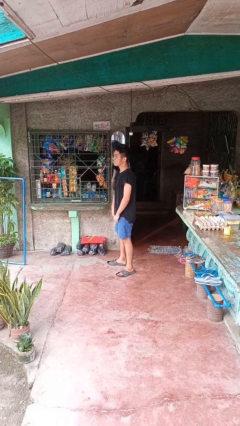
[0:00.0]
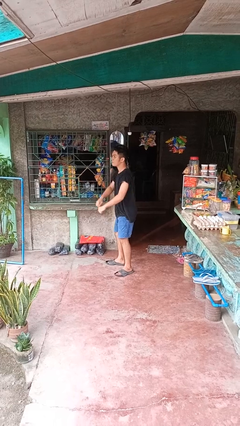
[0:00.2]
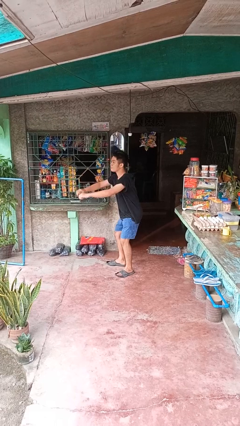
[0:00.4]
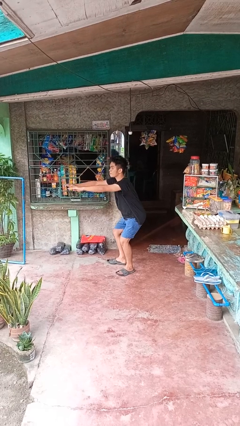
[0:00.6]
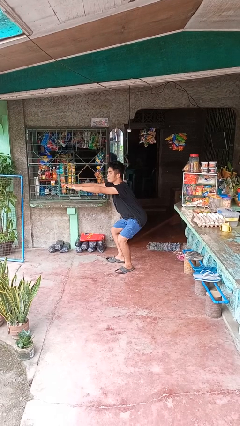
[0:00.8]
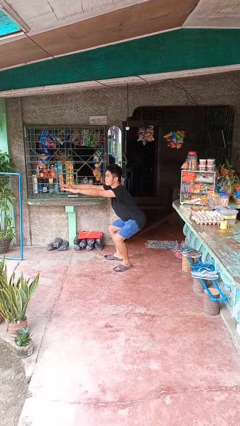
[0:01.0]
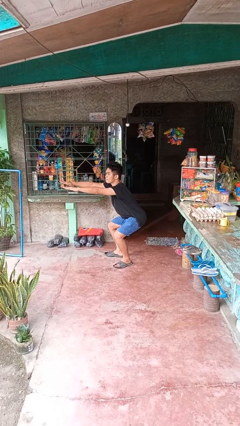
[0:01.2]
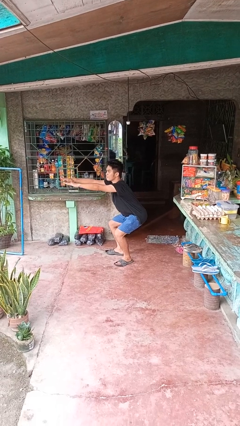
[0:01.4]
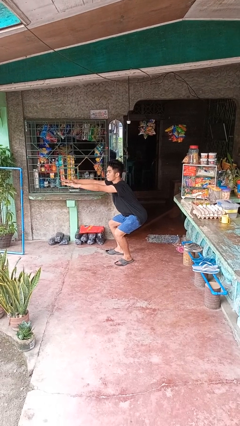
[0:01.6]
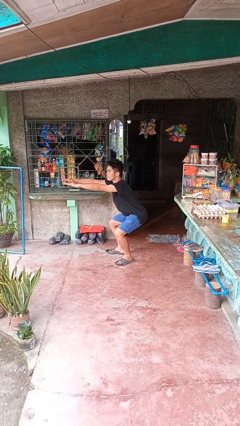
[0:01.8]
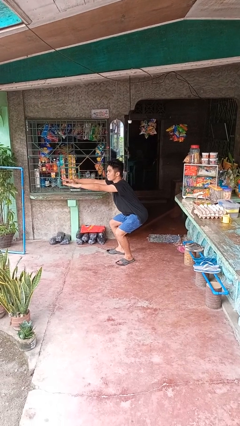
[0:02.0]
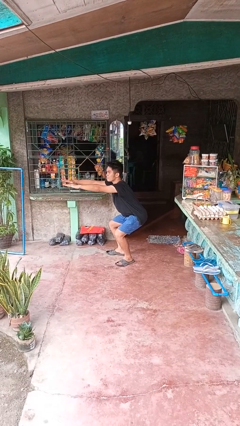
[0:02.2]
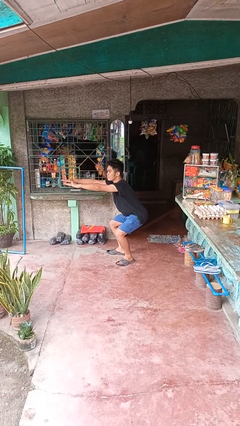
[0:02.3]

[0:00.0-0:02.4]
person squats

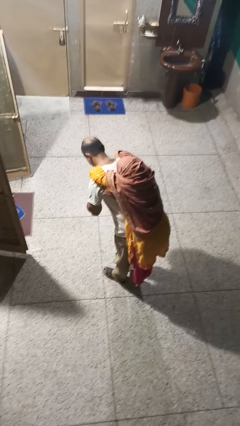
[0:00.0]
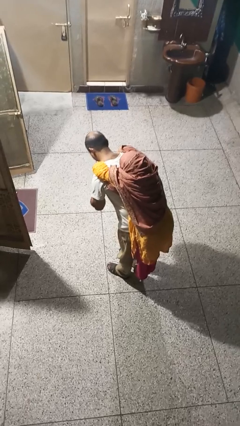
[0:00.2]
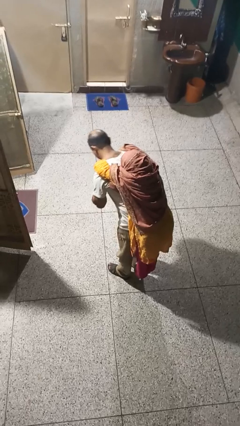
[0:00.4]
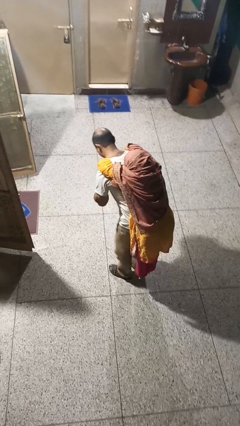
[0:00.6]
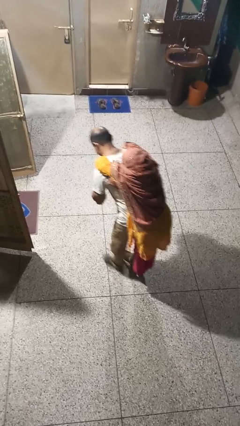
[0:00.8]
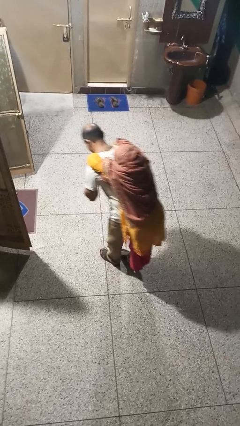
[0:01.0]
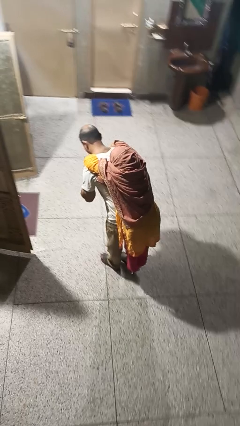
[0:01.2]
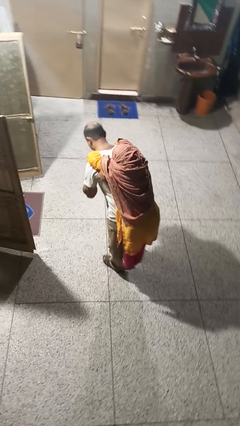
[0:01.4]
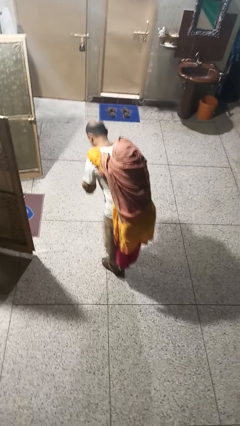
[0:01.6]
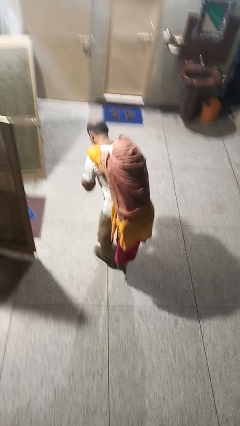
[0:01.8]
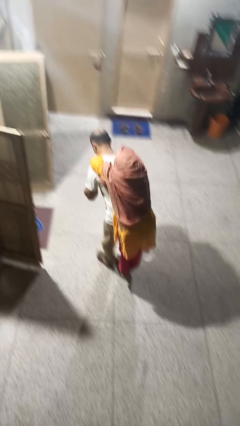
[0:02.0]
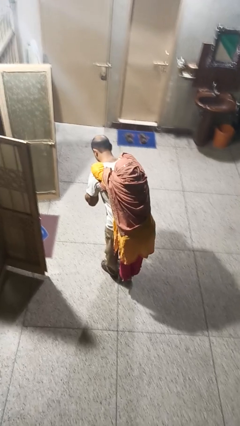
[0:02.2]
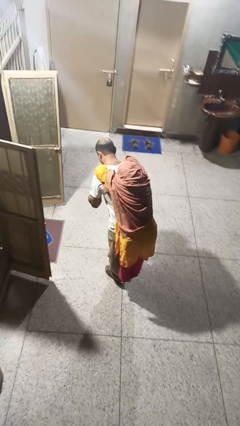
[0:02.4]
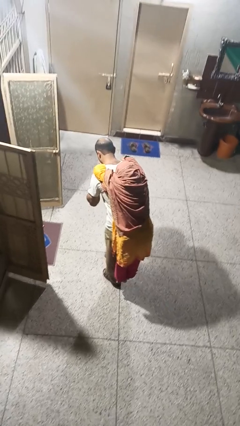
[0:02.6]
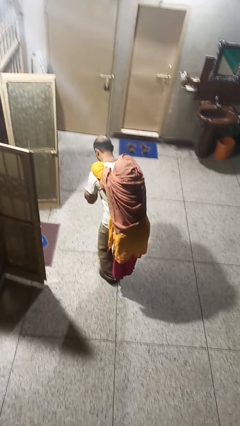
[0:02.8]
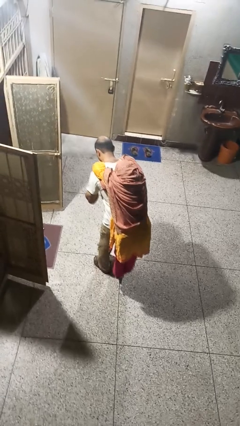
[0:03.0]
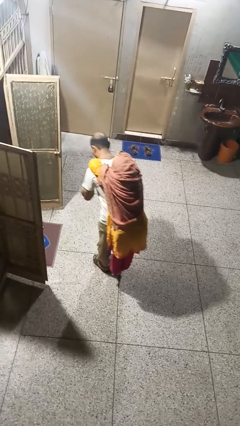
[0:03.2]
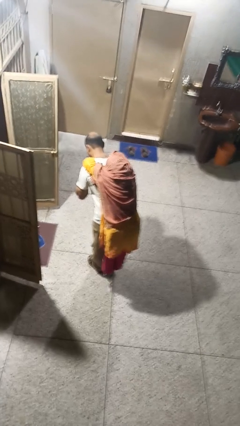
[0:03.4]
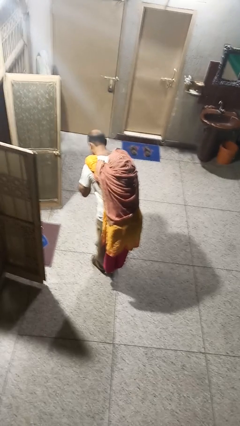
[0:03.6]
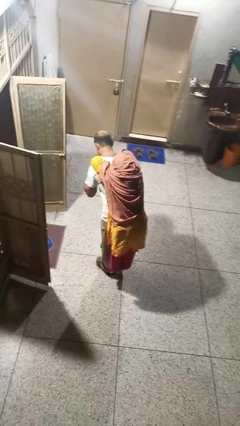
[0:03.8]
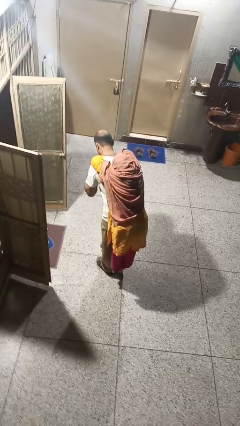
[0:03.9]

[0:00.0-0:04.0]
person carries person on back

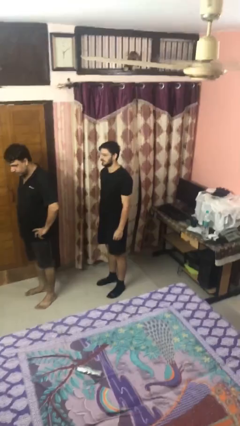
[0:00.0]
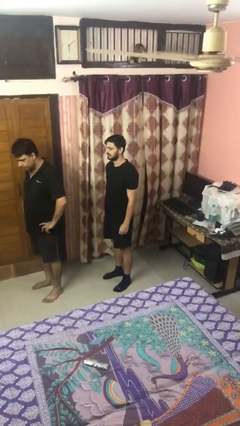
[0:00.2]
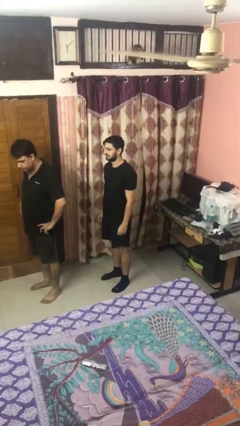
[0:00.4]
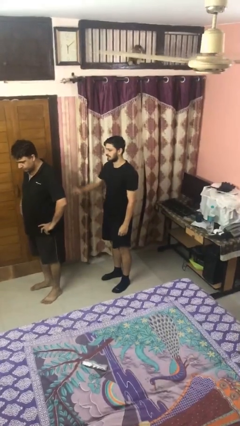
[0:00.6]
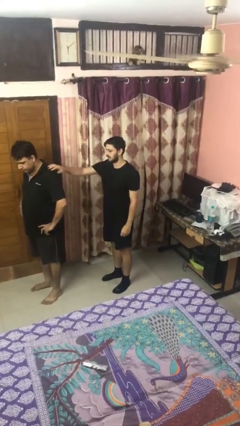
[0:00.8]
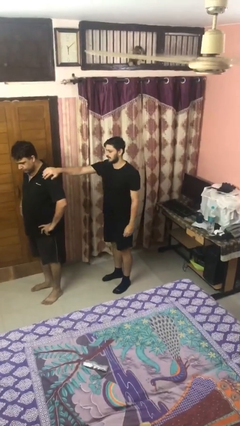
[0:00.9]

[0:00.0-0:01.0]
person grabs person by shoulder

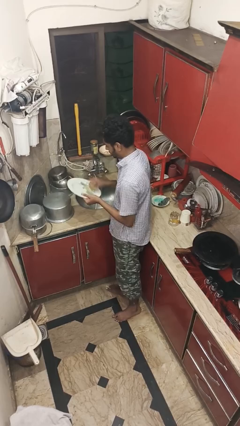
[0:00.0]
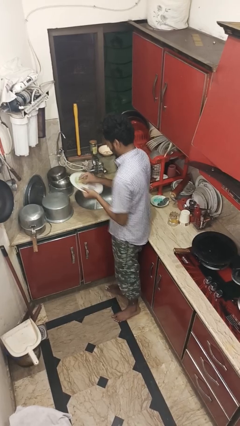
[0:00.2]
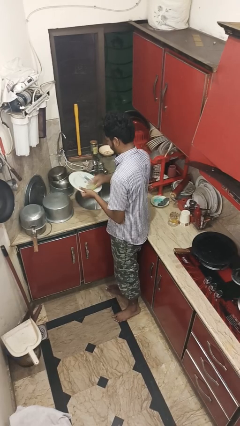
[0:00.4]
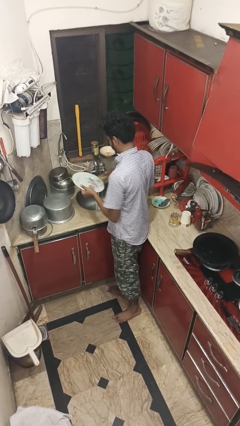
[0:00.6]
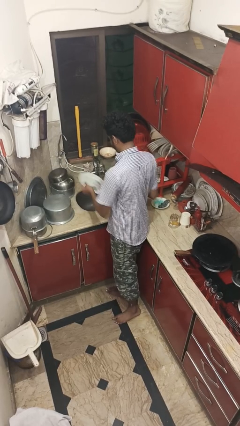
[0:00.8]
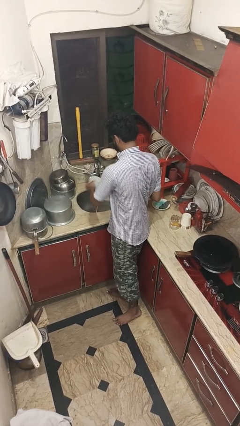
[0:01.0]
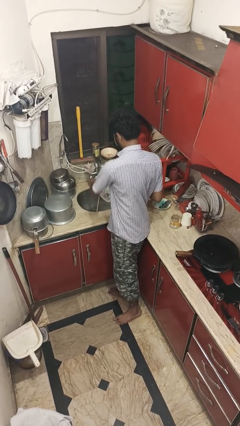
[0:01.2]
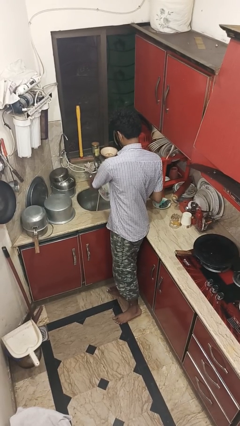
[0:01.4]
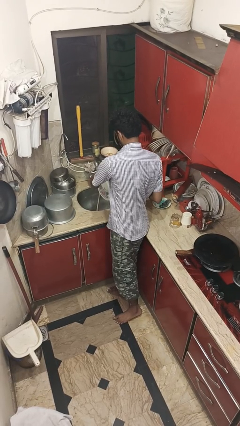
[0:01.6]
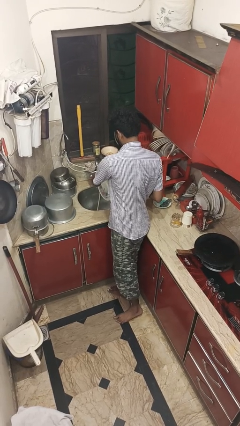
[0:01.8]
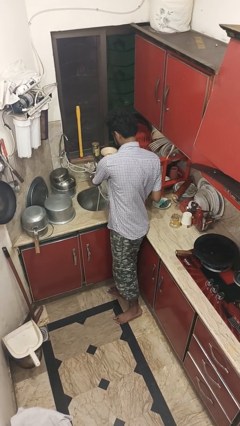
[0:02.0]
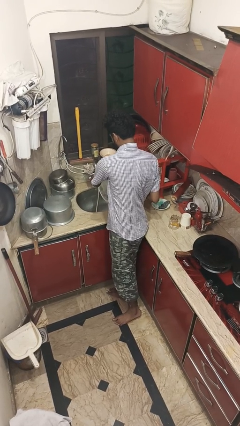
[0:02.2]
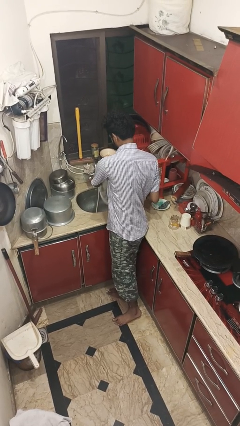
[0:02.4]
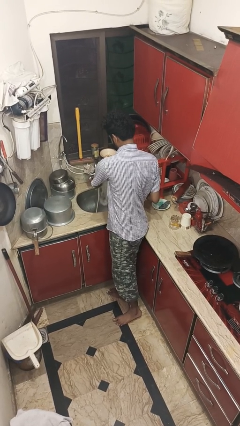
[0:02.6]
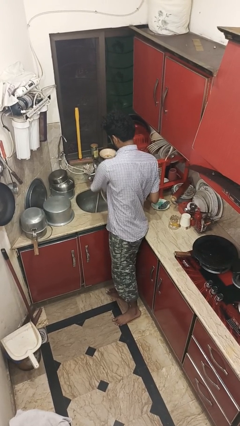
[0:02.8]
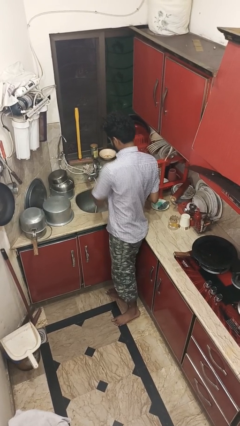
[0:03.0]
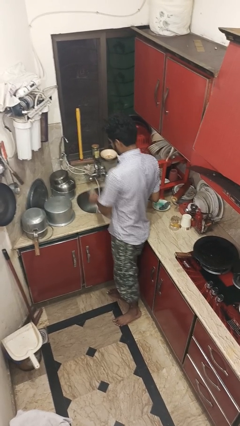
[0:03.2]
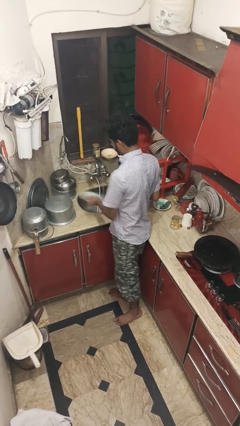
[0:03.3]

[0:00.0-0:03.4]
person washes dish

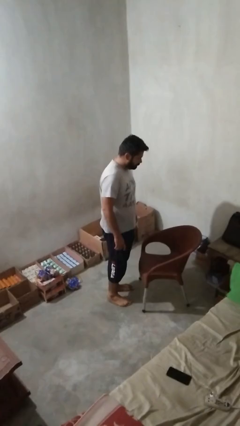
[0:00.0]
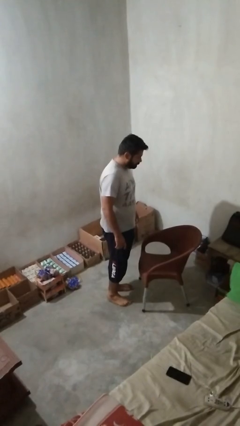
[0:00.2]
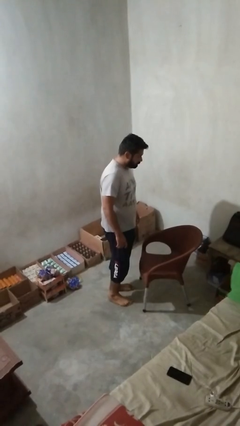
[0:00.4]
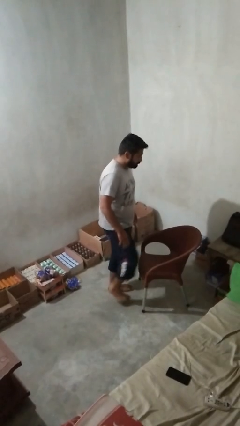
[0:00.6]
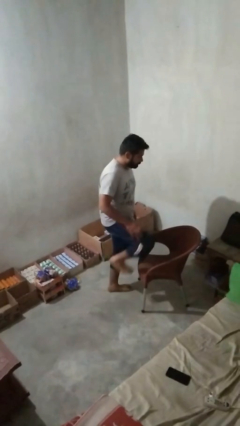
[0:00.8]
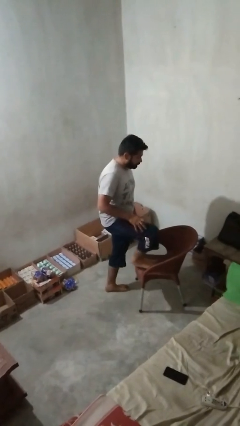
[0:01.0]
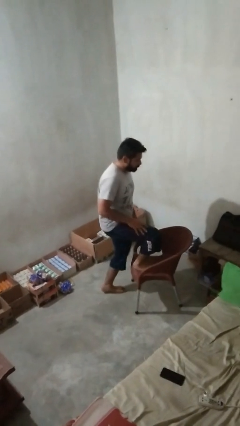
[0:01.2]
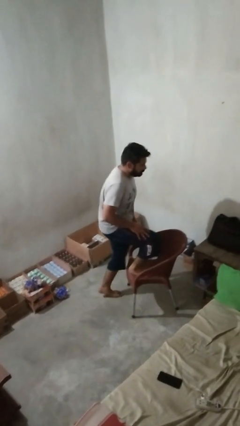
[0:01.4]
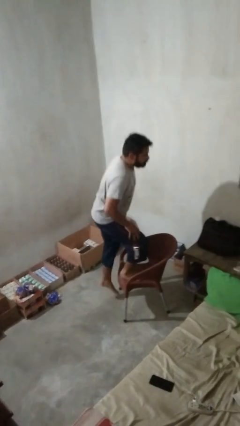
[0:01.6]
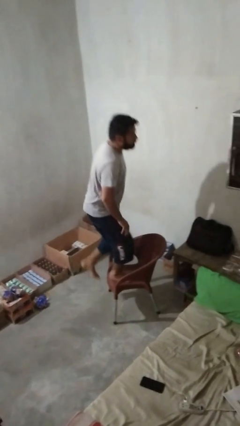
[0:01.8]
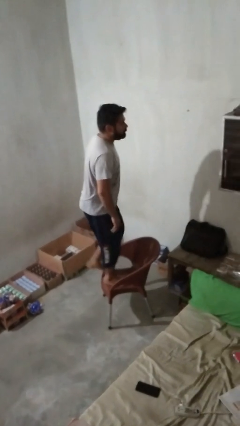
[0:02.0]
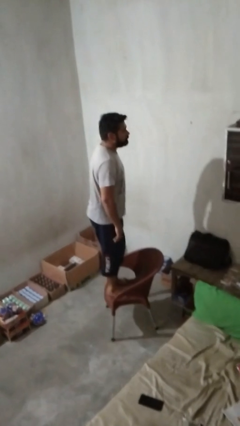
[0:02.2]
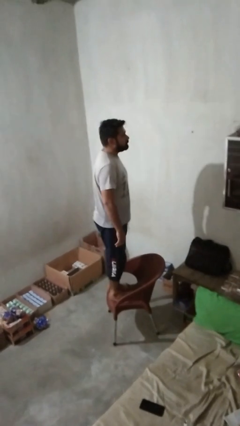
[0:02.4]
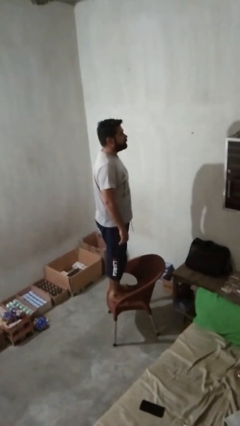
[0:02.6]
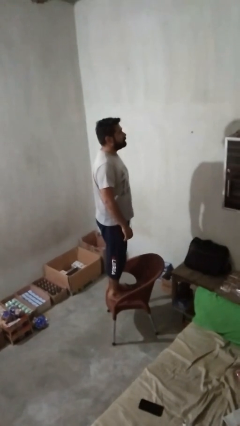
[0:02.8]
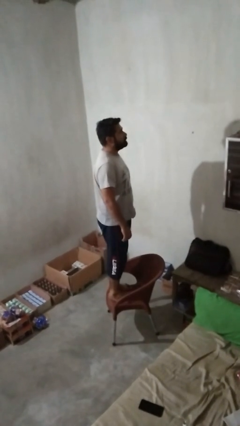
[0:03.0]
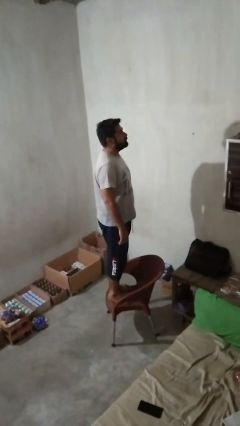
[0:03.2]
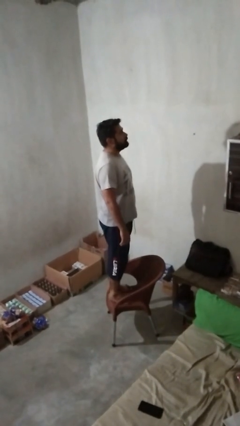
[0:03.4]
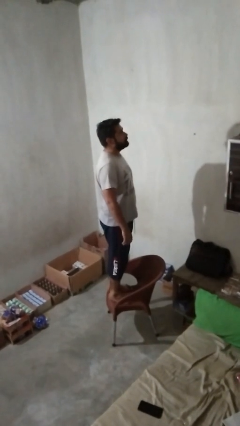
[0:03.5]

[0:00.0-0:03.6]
person climbs on chair

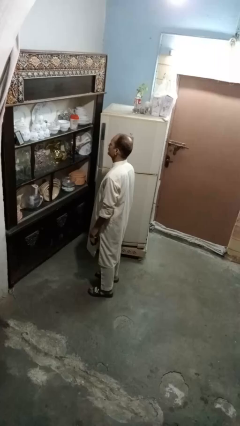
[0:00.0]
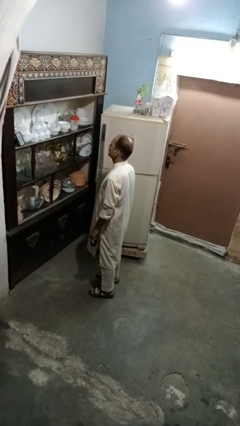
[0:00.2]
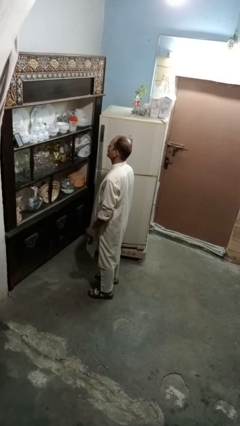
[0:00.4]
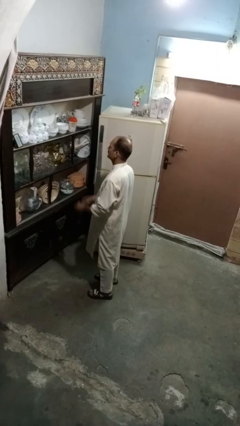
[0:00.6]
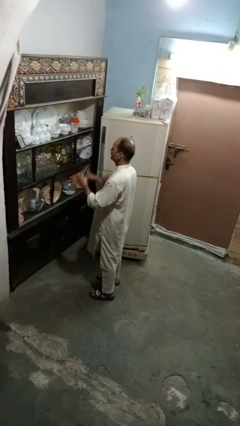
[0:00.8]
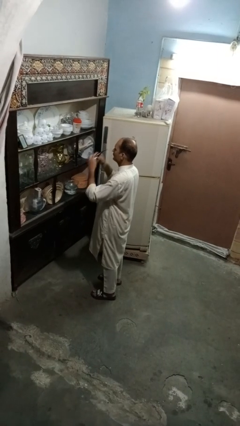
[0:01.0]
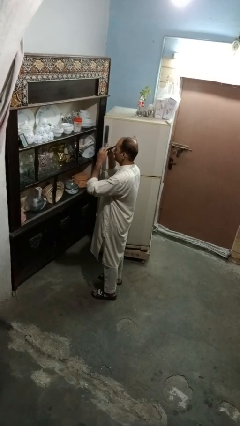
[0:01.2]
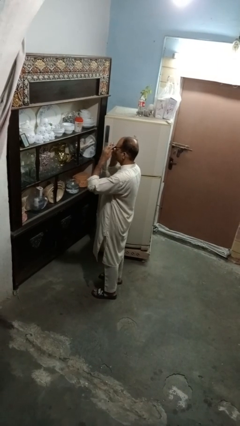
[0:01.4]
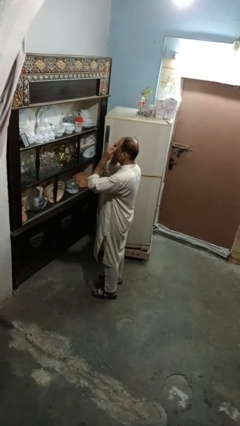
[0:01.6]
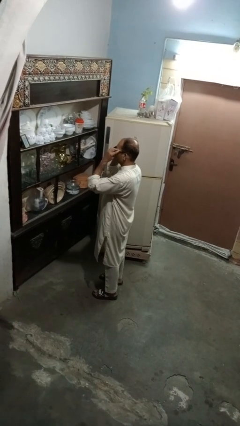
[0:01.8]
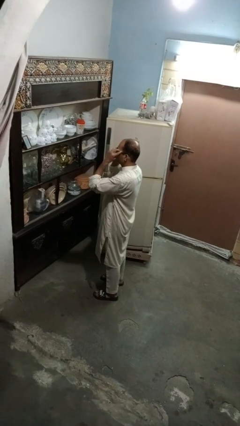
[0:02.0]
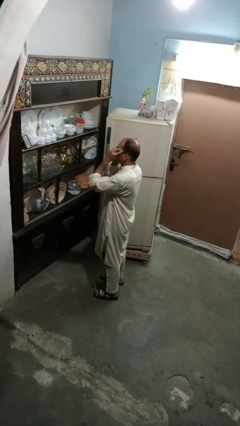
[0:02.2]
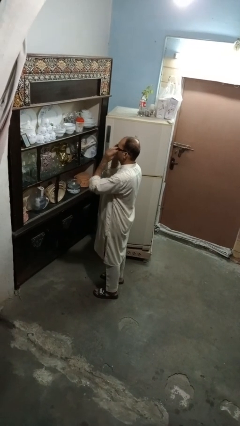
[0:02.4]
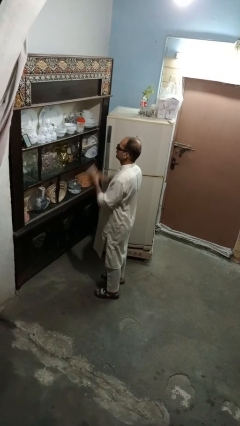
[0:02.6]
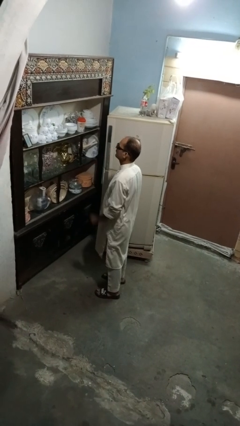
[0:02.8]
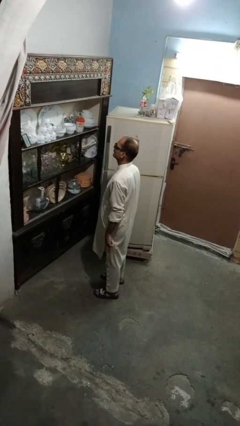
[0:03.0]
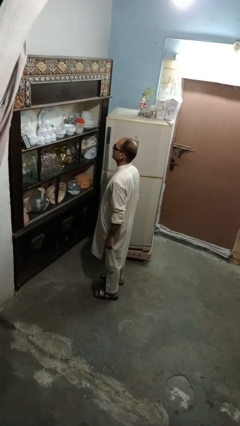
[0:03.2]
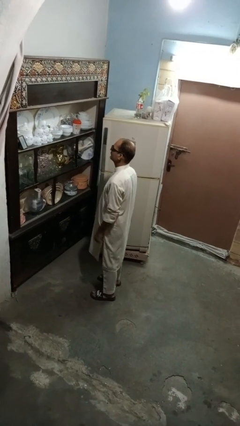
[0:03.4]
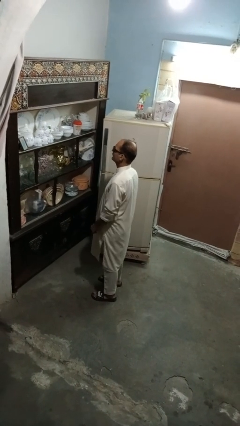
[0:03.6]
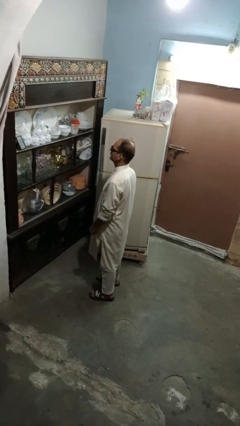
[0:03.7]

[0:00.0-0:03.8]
person puts on sunglasses
